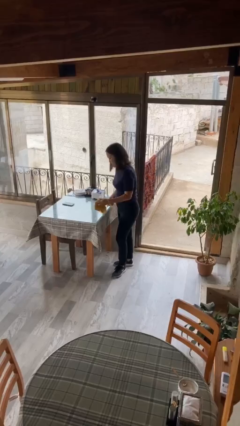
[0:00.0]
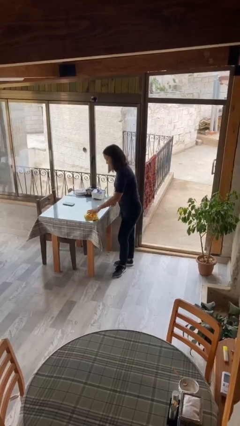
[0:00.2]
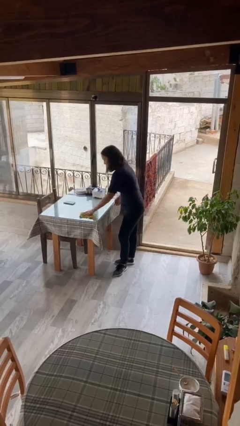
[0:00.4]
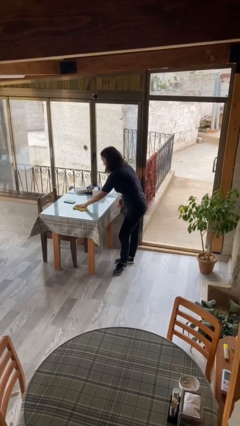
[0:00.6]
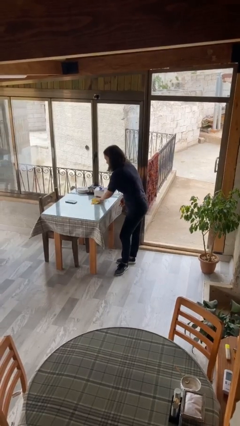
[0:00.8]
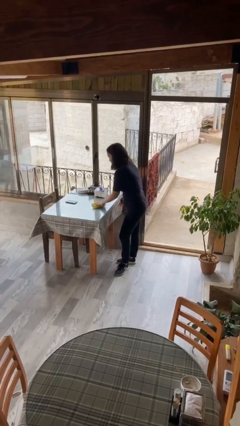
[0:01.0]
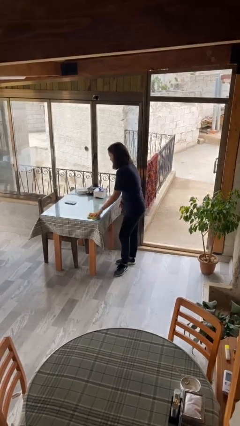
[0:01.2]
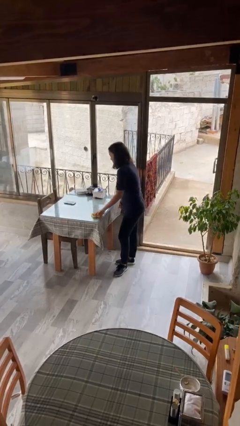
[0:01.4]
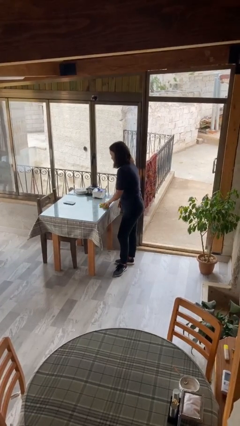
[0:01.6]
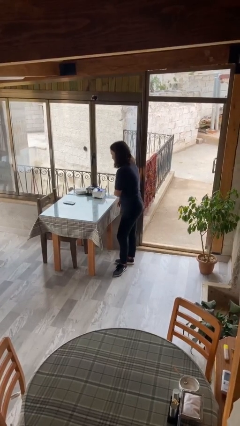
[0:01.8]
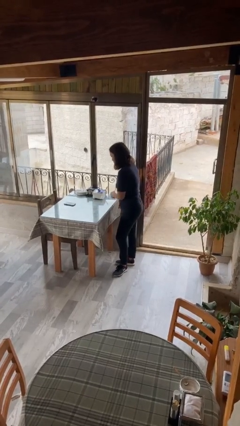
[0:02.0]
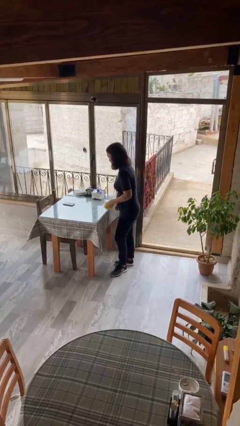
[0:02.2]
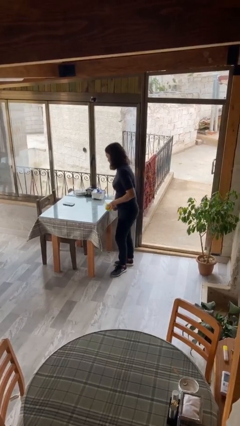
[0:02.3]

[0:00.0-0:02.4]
person cleans table with rag

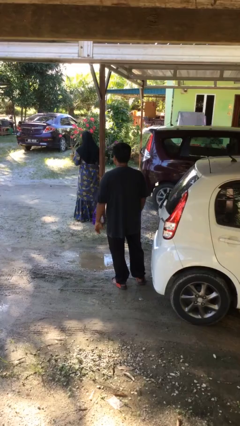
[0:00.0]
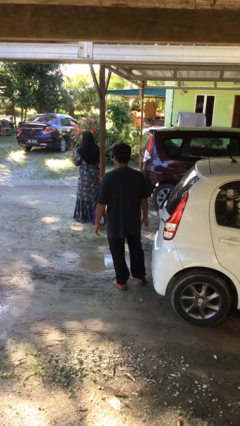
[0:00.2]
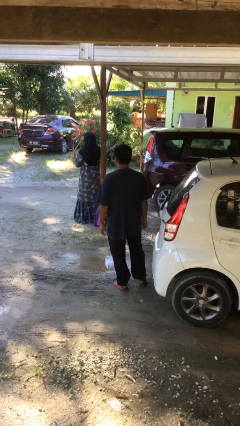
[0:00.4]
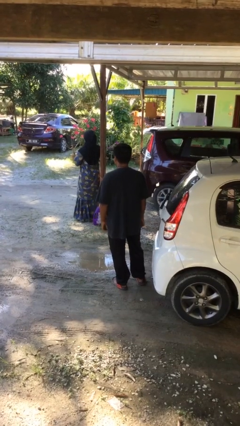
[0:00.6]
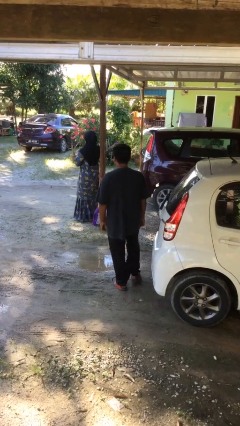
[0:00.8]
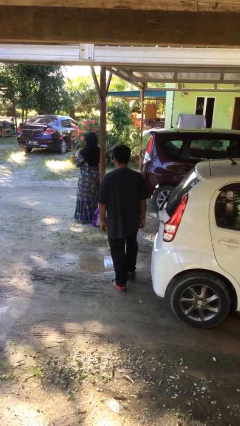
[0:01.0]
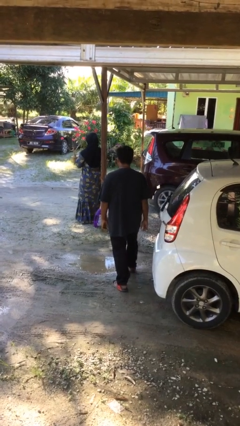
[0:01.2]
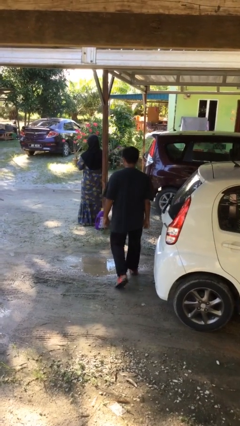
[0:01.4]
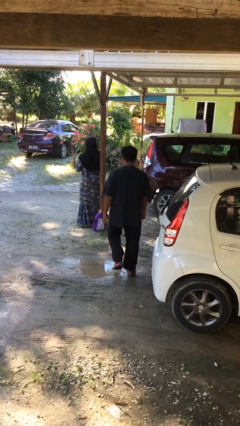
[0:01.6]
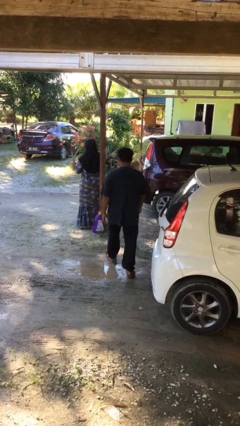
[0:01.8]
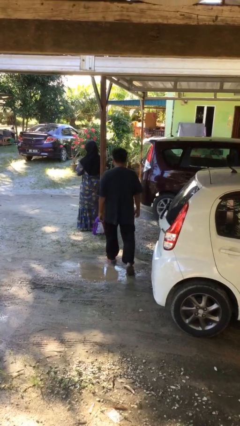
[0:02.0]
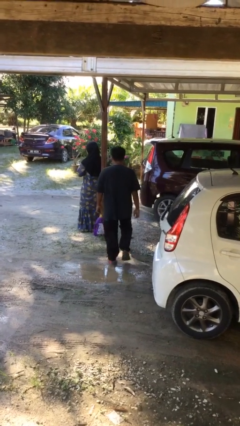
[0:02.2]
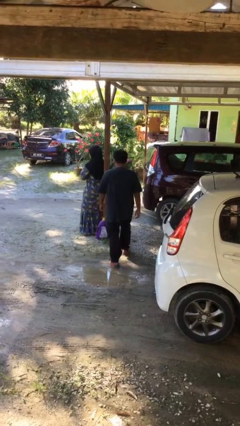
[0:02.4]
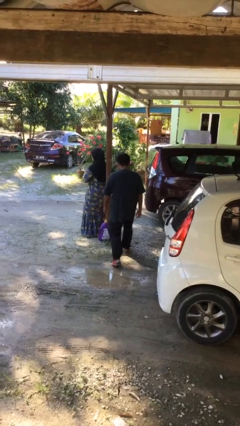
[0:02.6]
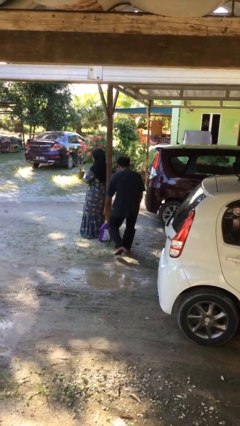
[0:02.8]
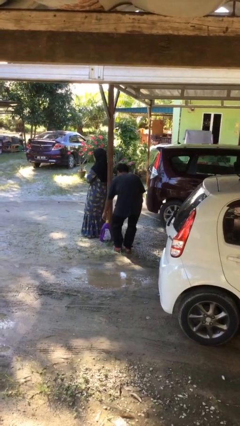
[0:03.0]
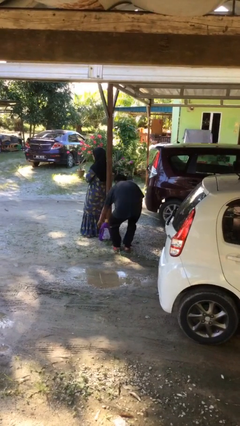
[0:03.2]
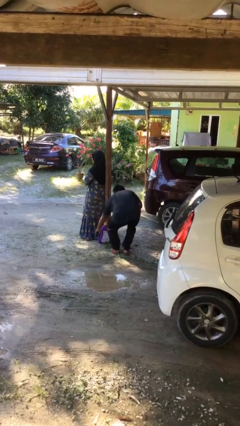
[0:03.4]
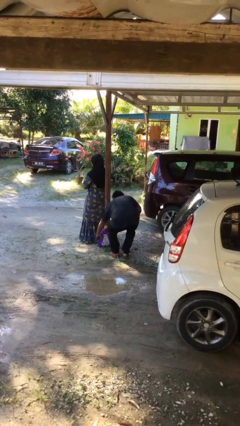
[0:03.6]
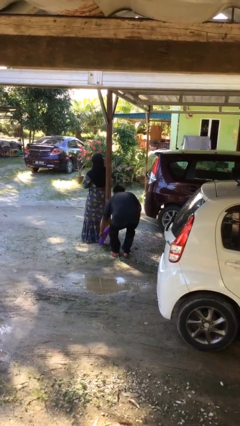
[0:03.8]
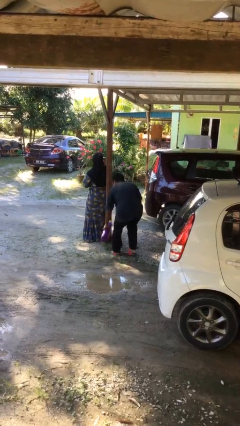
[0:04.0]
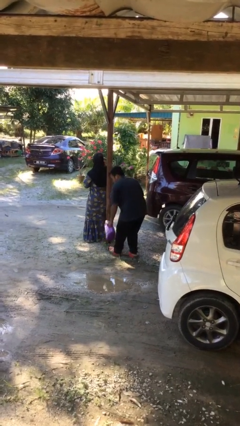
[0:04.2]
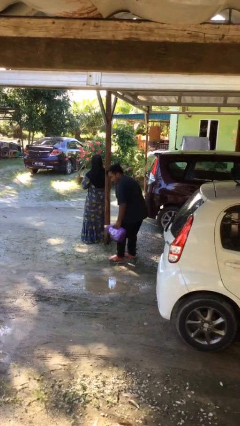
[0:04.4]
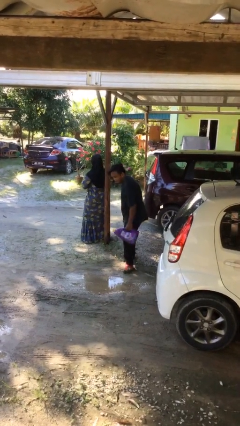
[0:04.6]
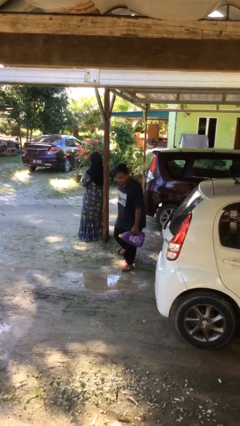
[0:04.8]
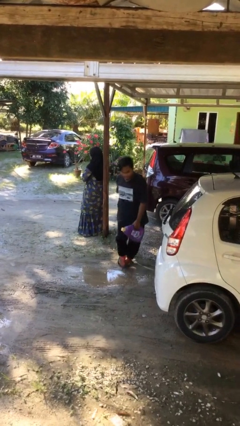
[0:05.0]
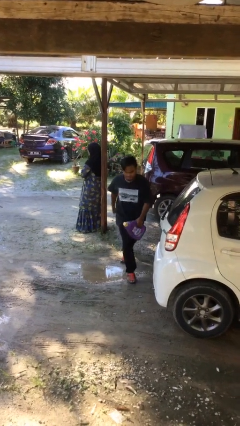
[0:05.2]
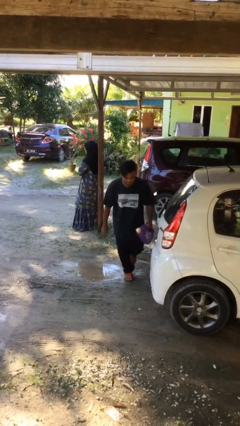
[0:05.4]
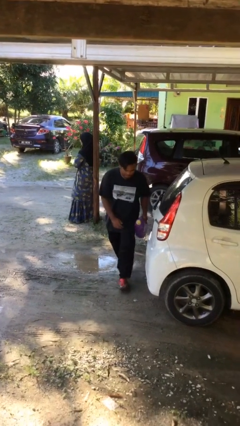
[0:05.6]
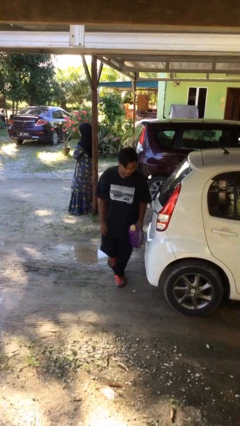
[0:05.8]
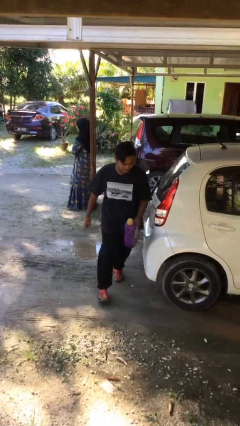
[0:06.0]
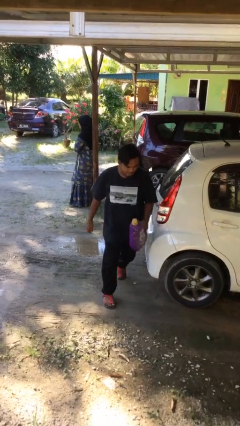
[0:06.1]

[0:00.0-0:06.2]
person steals object from person

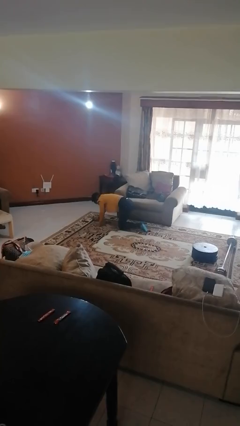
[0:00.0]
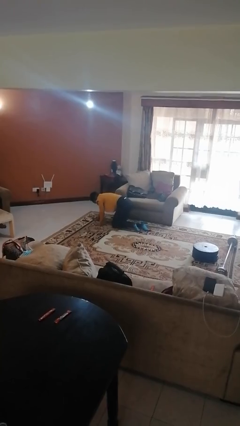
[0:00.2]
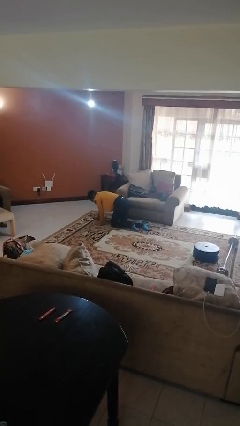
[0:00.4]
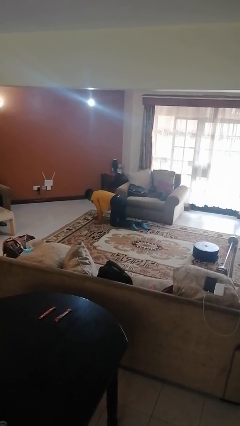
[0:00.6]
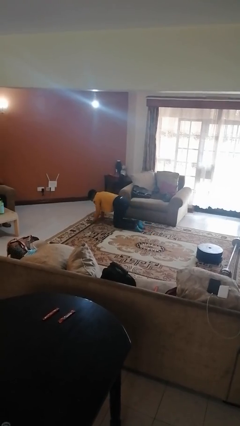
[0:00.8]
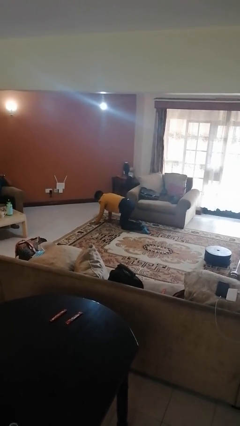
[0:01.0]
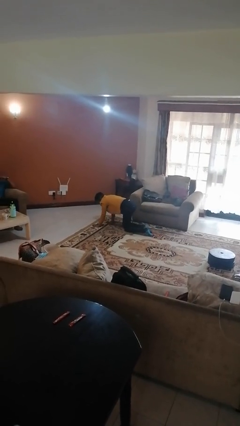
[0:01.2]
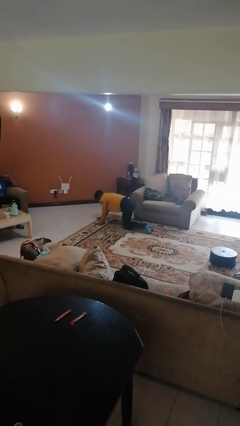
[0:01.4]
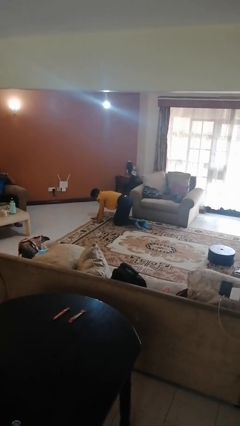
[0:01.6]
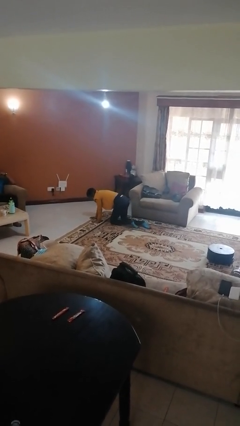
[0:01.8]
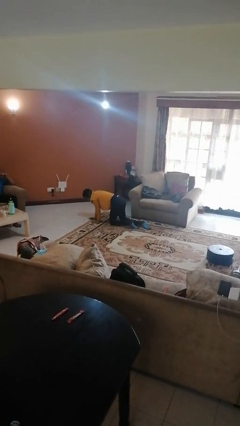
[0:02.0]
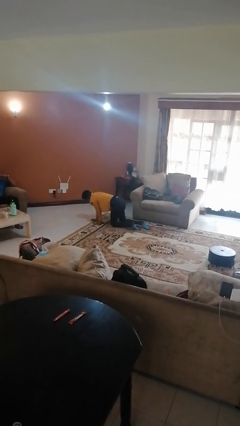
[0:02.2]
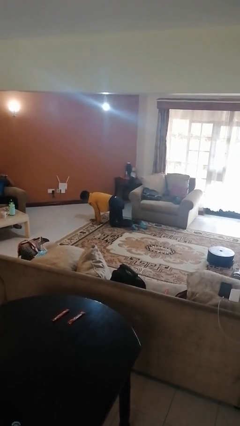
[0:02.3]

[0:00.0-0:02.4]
person crawls

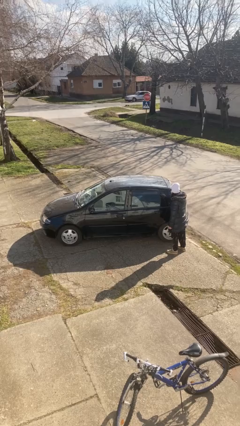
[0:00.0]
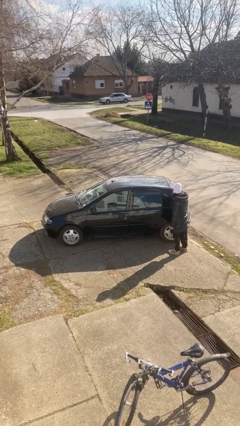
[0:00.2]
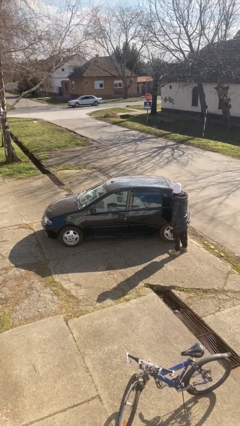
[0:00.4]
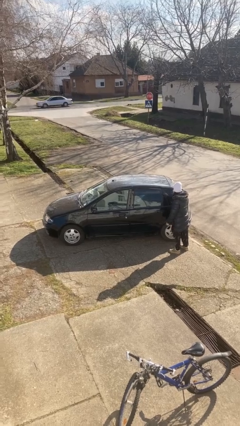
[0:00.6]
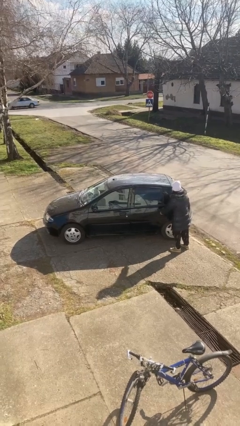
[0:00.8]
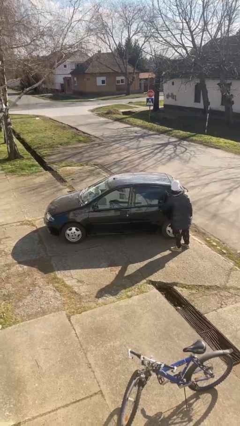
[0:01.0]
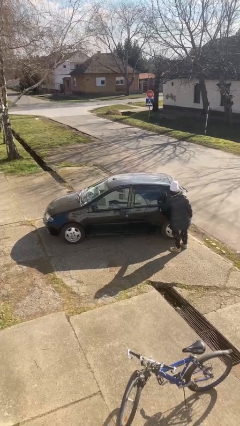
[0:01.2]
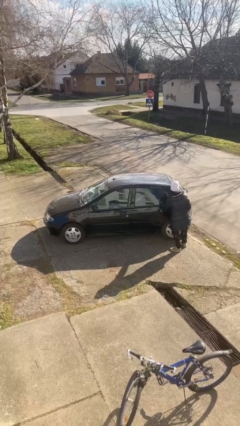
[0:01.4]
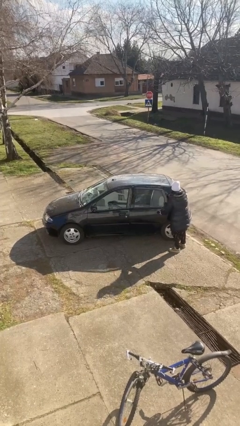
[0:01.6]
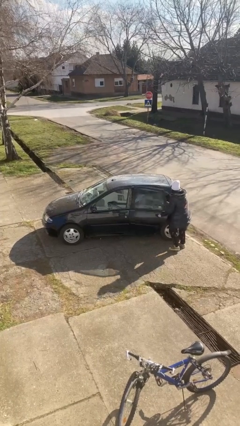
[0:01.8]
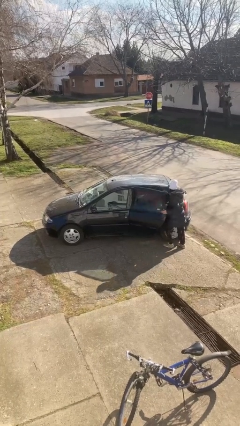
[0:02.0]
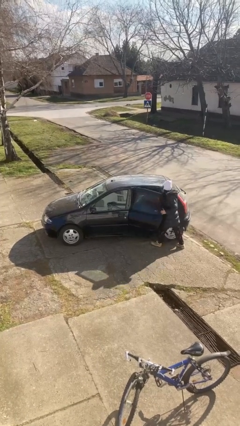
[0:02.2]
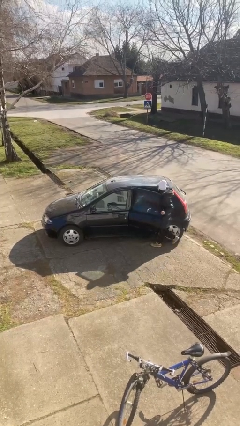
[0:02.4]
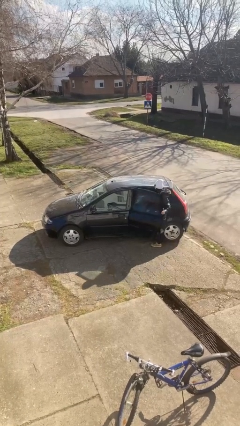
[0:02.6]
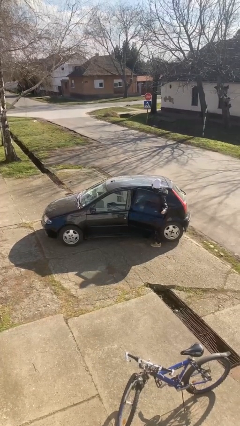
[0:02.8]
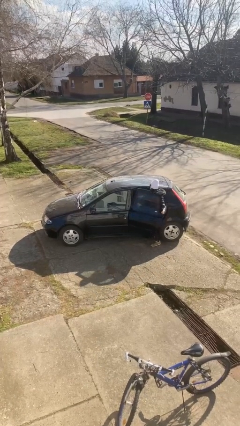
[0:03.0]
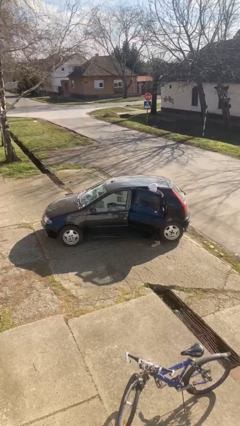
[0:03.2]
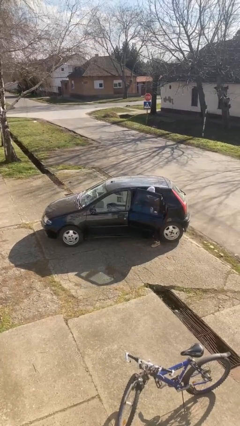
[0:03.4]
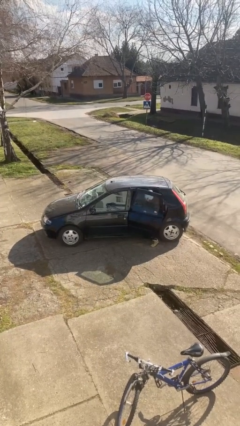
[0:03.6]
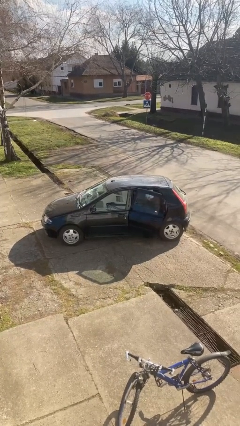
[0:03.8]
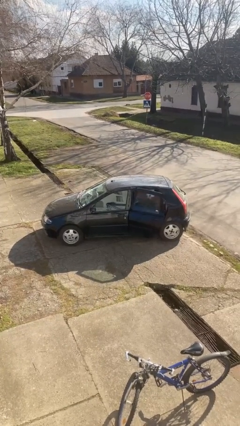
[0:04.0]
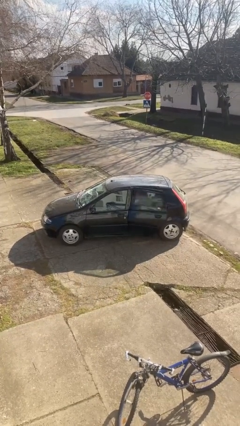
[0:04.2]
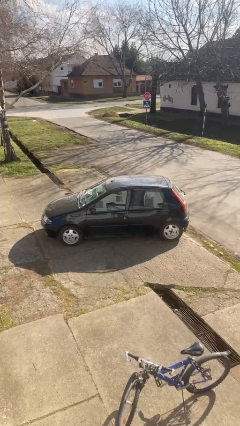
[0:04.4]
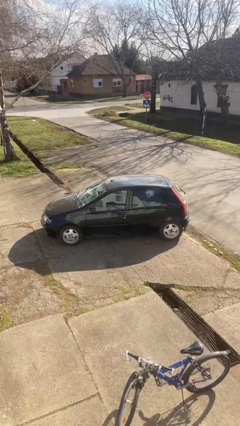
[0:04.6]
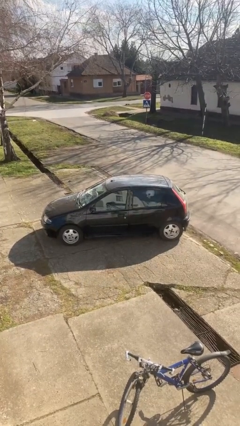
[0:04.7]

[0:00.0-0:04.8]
car picks up person

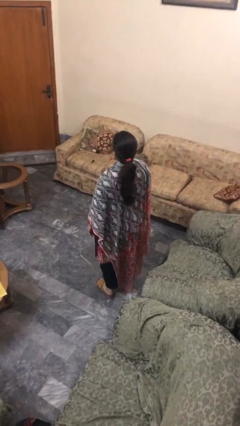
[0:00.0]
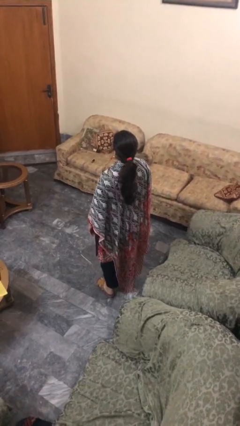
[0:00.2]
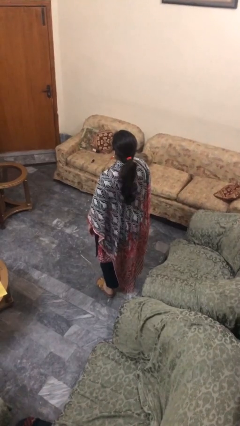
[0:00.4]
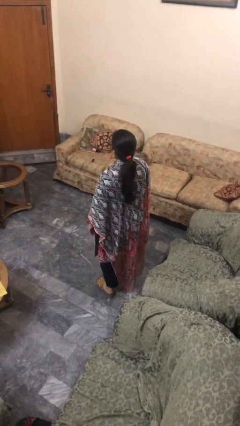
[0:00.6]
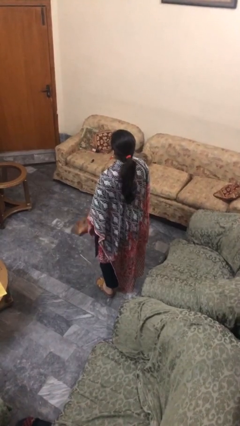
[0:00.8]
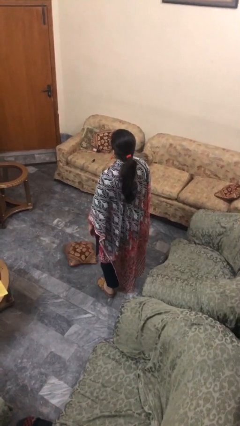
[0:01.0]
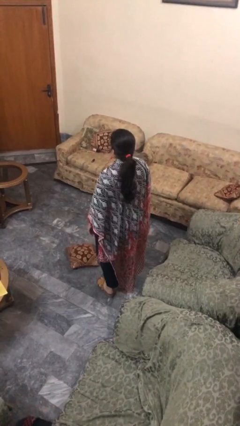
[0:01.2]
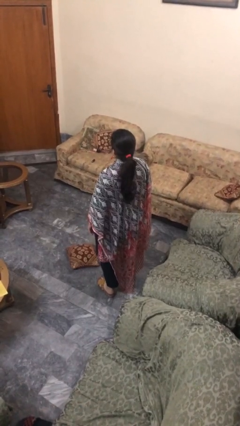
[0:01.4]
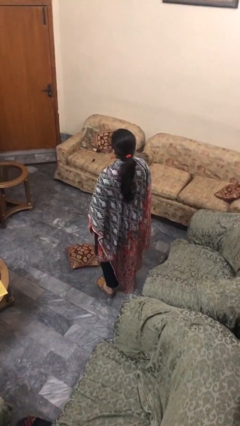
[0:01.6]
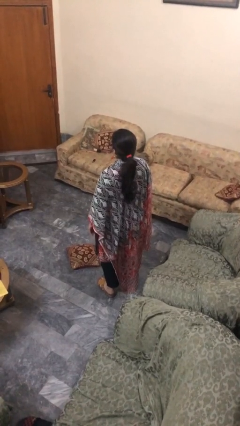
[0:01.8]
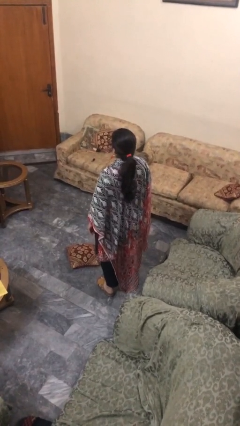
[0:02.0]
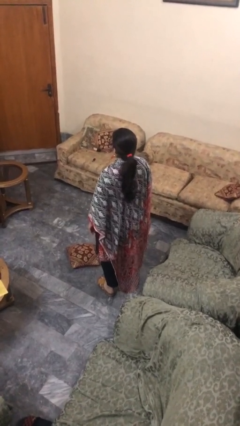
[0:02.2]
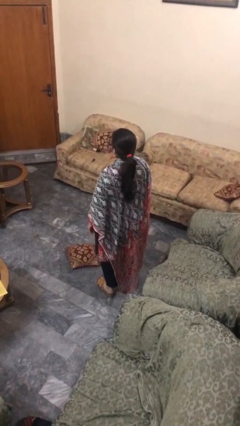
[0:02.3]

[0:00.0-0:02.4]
person throws object to ground
